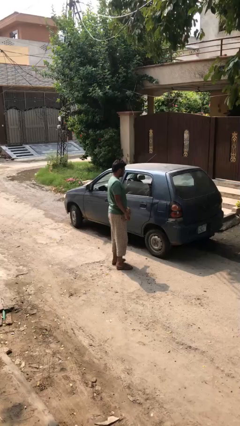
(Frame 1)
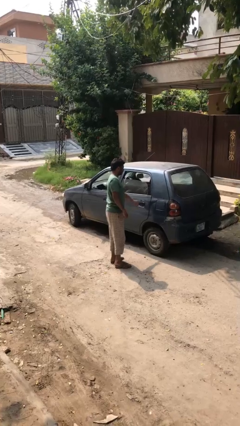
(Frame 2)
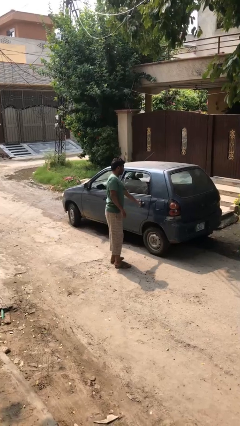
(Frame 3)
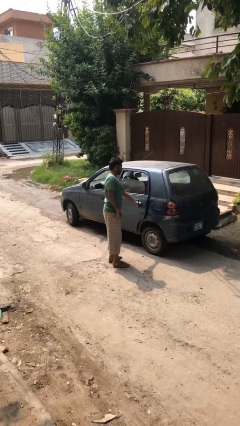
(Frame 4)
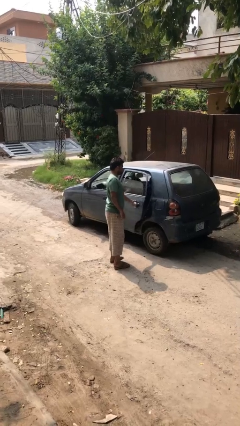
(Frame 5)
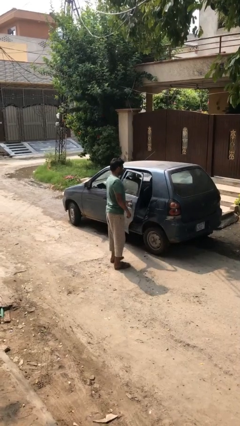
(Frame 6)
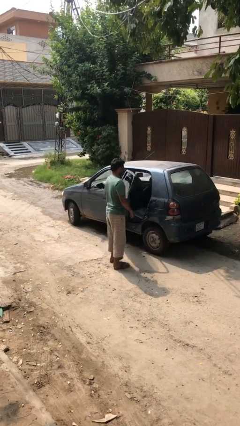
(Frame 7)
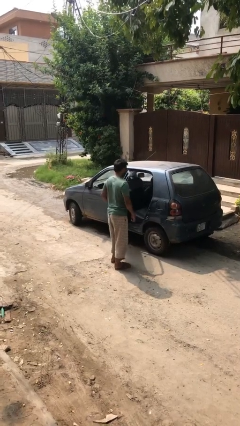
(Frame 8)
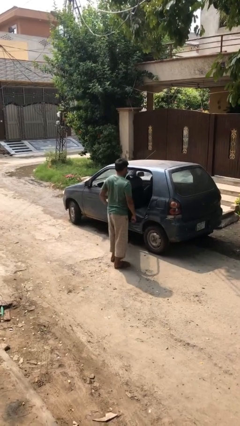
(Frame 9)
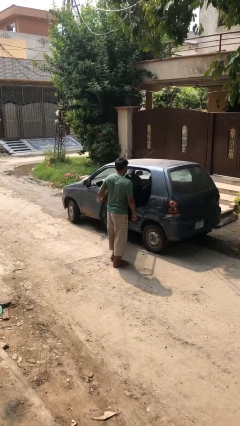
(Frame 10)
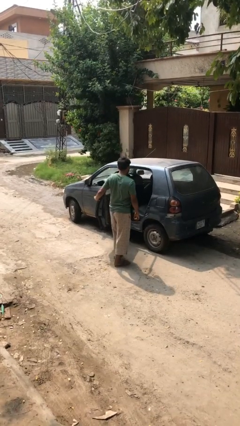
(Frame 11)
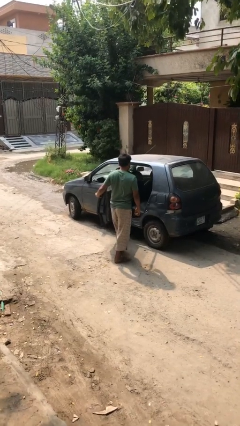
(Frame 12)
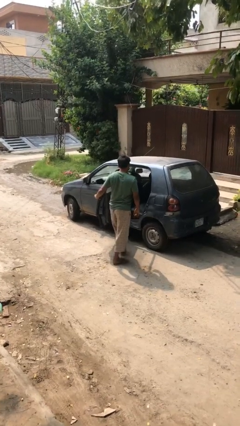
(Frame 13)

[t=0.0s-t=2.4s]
person opens car door

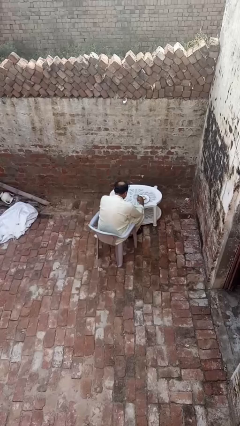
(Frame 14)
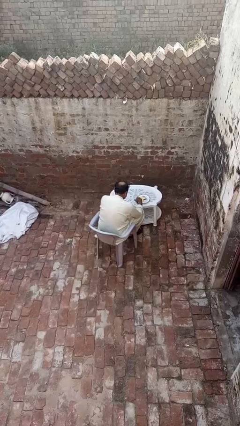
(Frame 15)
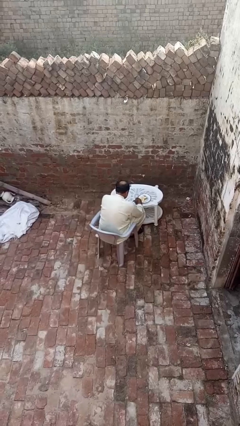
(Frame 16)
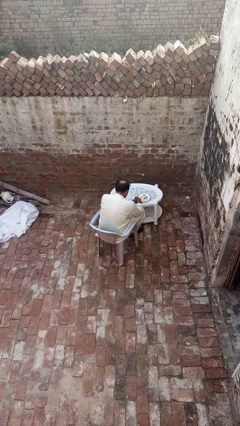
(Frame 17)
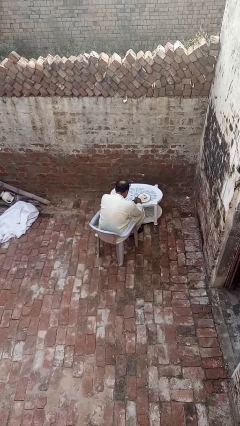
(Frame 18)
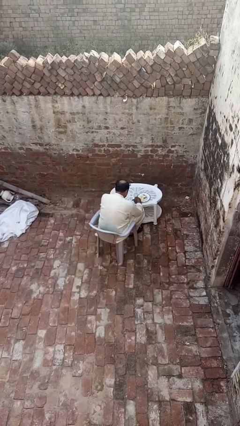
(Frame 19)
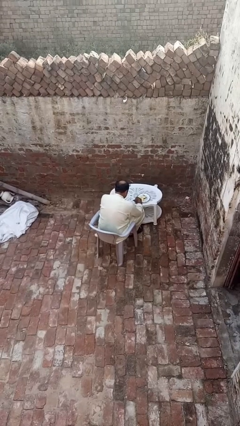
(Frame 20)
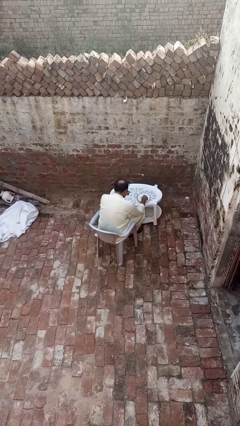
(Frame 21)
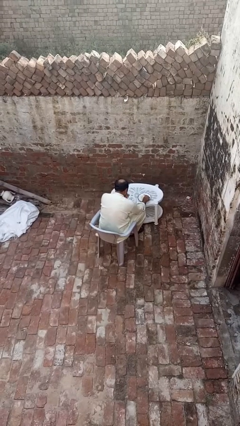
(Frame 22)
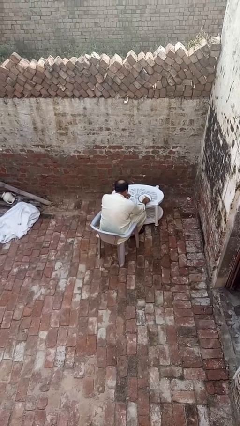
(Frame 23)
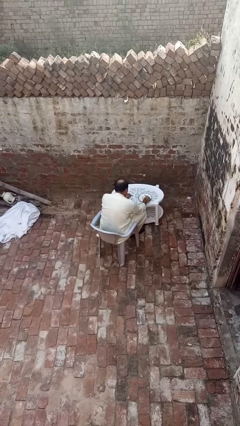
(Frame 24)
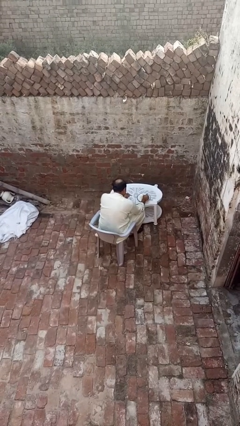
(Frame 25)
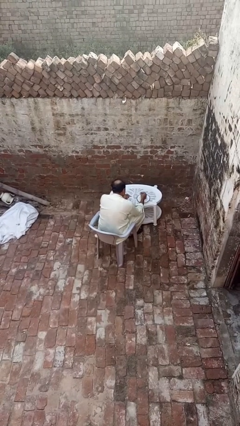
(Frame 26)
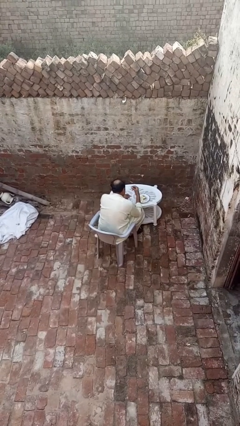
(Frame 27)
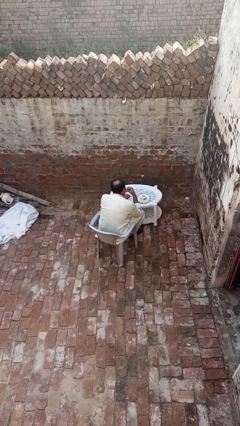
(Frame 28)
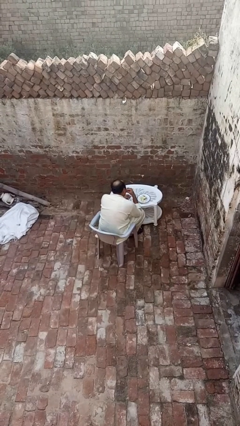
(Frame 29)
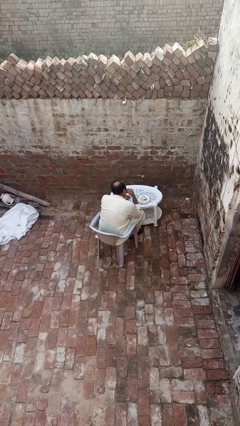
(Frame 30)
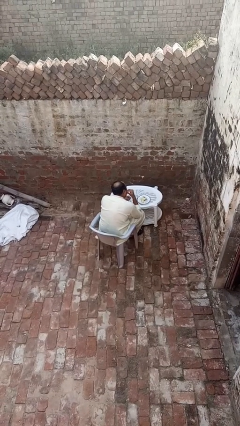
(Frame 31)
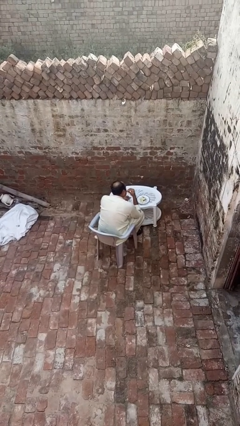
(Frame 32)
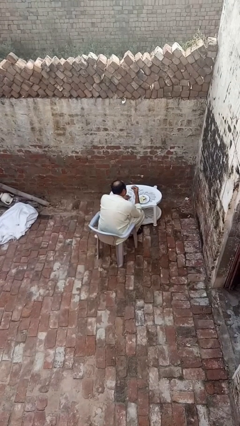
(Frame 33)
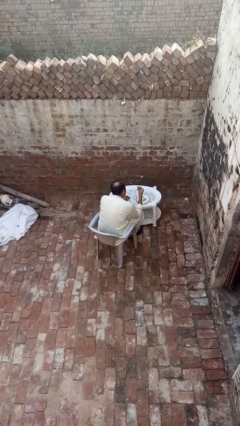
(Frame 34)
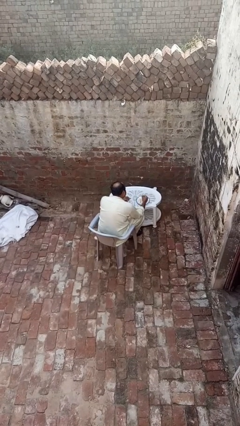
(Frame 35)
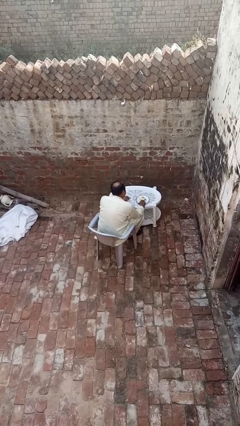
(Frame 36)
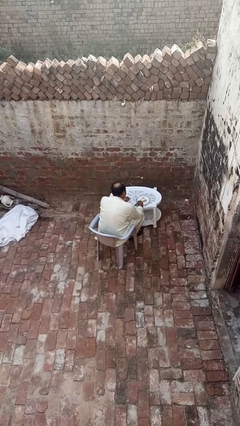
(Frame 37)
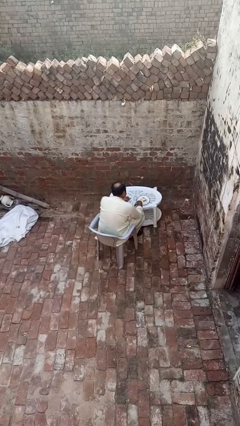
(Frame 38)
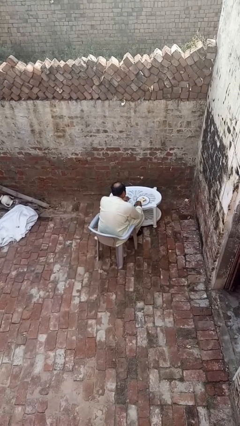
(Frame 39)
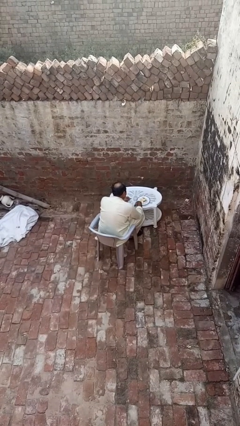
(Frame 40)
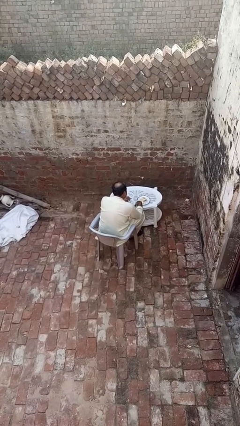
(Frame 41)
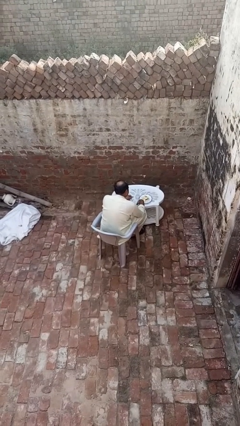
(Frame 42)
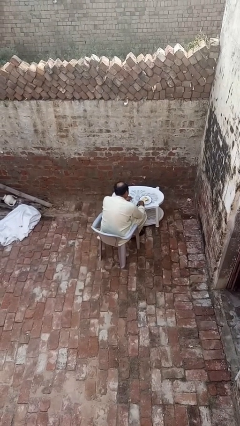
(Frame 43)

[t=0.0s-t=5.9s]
person eats with hands

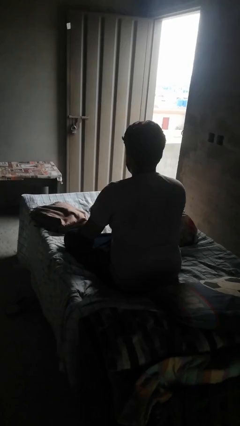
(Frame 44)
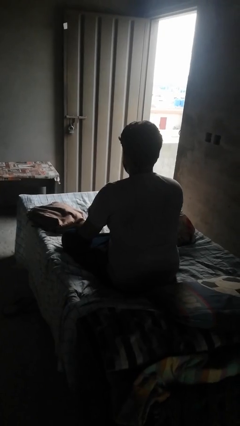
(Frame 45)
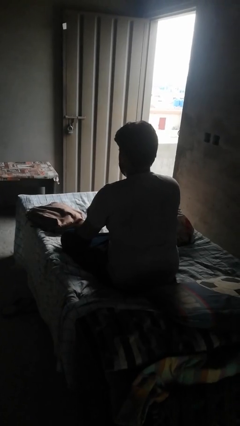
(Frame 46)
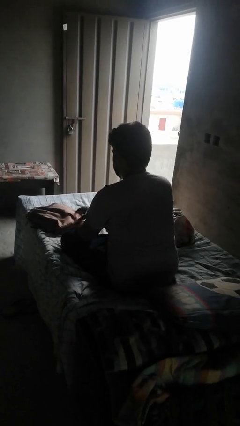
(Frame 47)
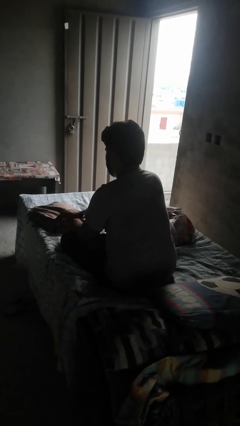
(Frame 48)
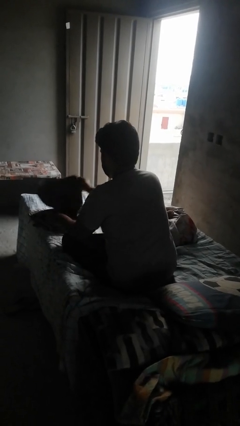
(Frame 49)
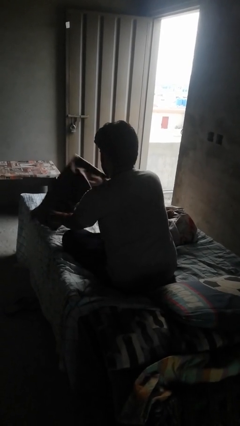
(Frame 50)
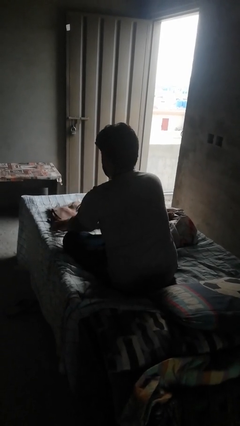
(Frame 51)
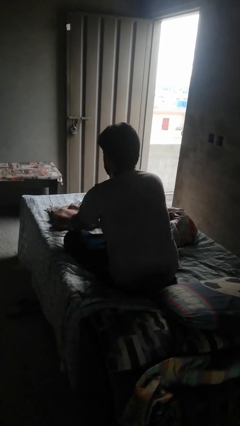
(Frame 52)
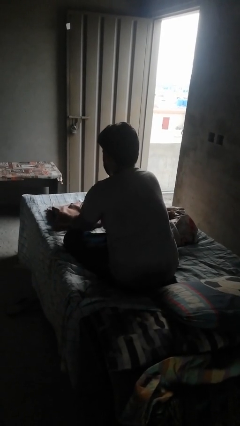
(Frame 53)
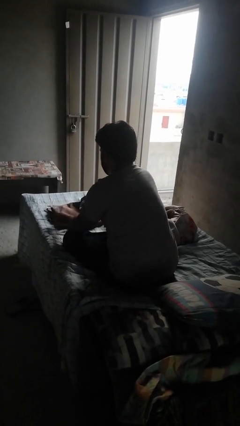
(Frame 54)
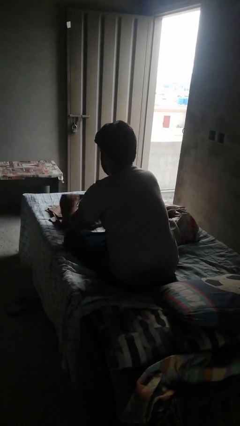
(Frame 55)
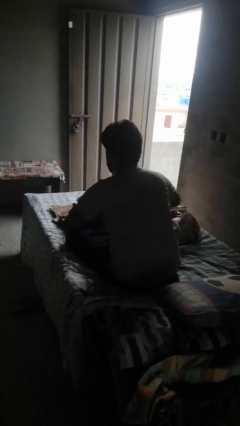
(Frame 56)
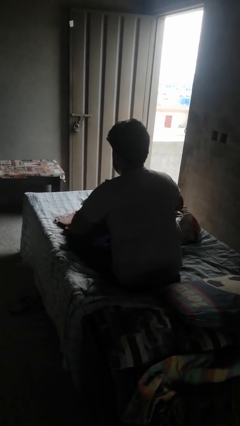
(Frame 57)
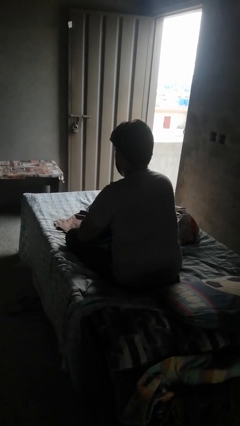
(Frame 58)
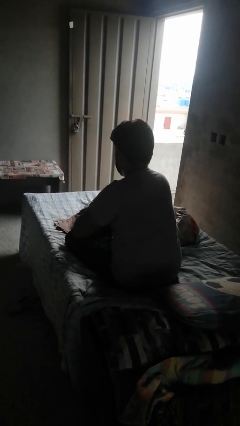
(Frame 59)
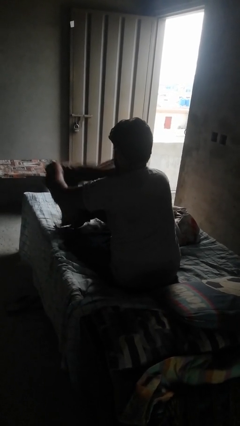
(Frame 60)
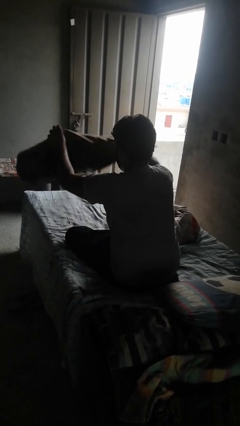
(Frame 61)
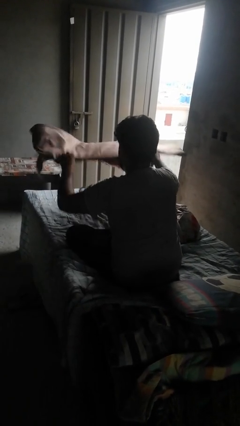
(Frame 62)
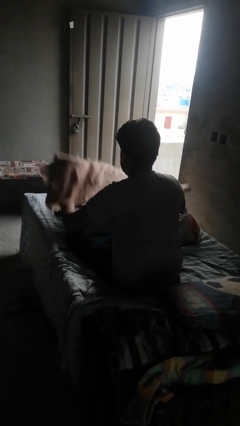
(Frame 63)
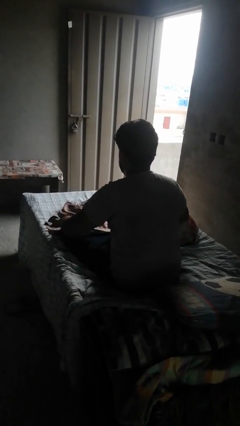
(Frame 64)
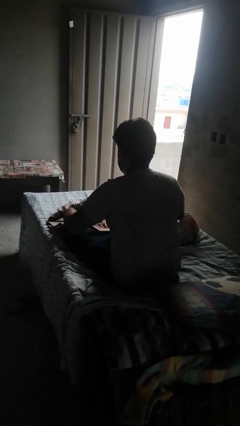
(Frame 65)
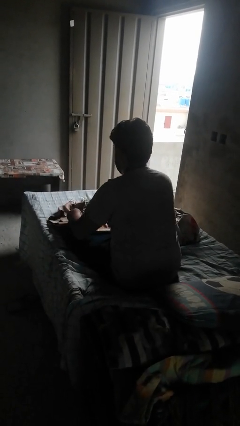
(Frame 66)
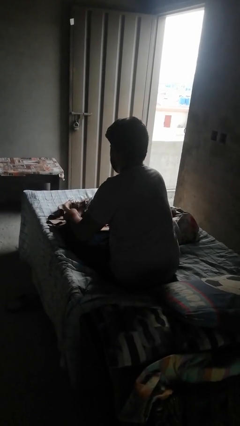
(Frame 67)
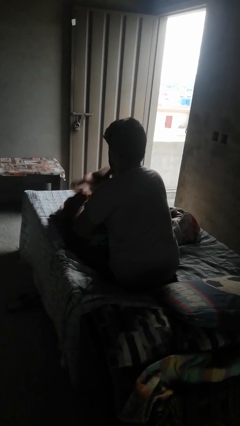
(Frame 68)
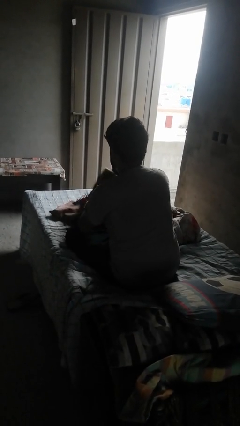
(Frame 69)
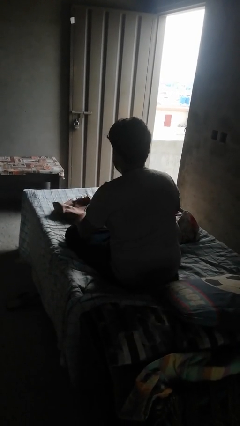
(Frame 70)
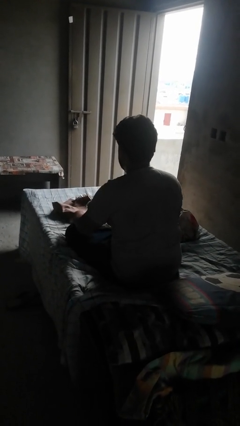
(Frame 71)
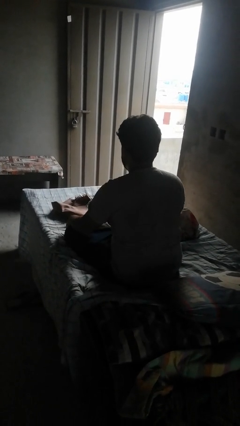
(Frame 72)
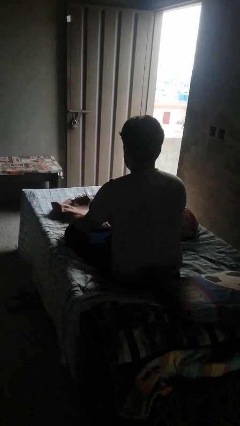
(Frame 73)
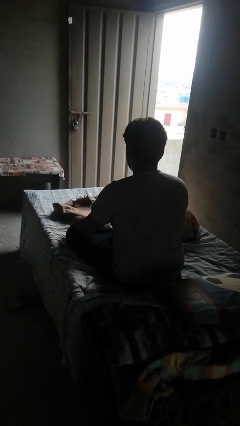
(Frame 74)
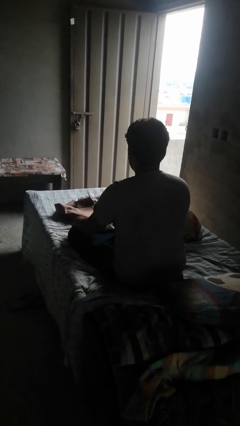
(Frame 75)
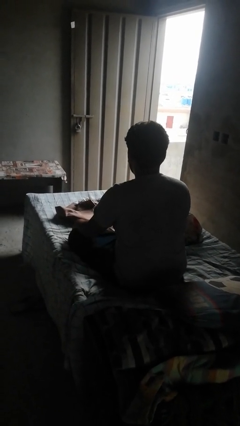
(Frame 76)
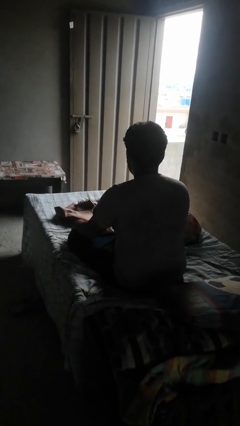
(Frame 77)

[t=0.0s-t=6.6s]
person unfolds blanket

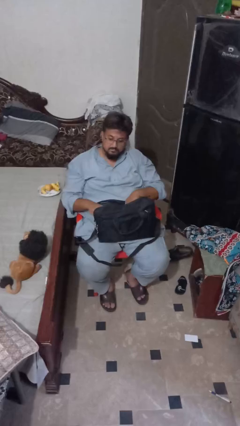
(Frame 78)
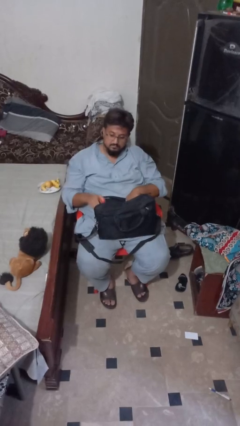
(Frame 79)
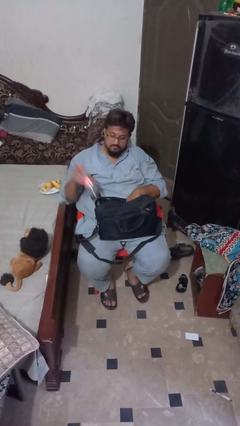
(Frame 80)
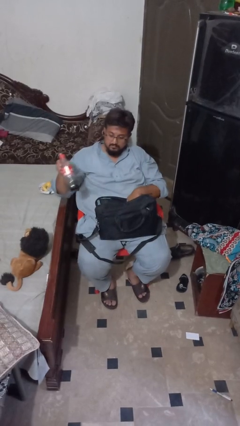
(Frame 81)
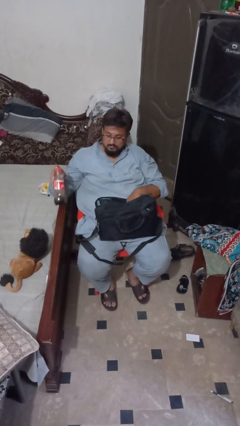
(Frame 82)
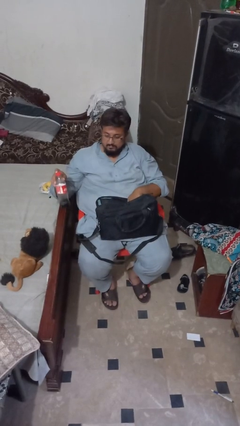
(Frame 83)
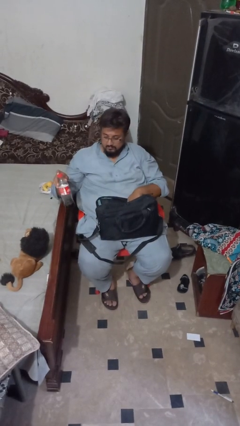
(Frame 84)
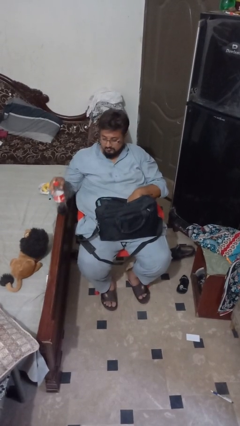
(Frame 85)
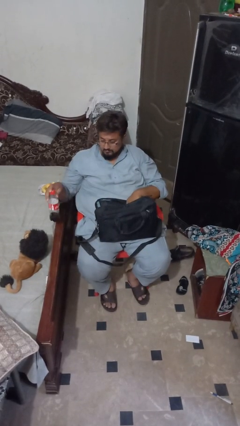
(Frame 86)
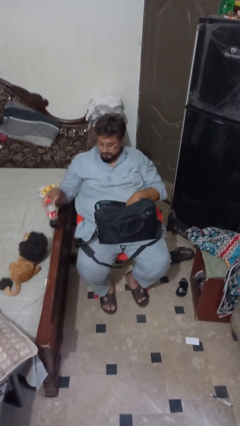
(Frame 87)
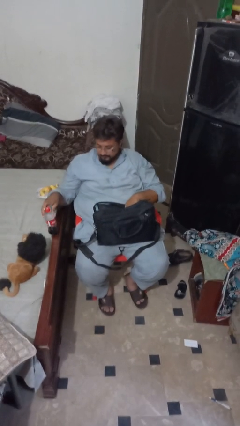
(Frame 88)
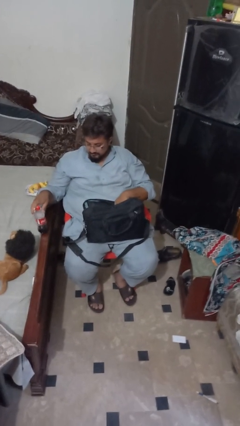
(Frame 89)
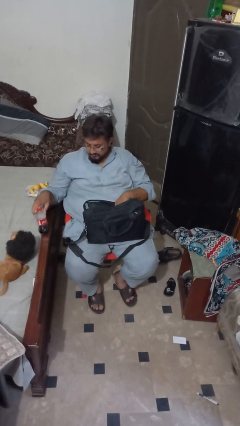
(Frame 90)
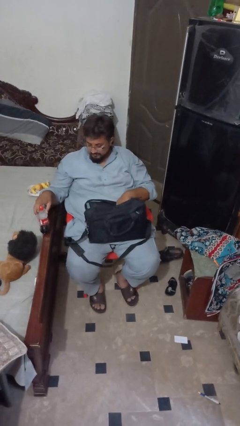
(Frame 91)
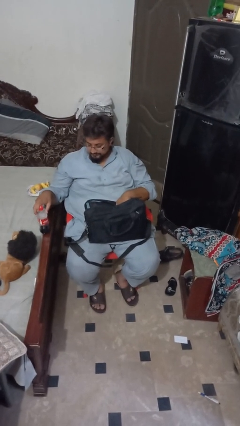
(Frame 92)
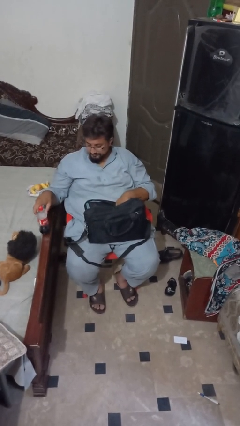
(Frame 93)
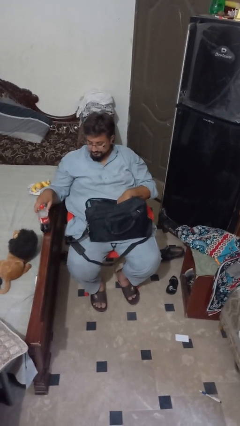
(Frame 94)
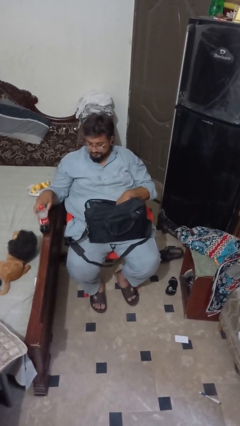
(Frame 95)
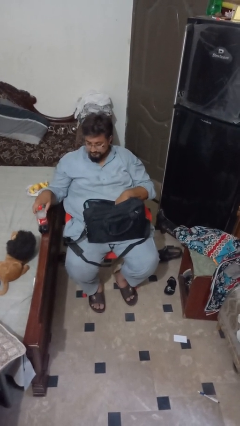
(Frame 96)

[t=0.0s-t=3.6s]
person takes object from bag
